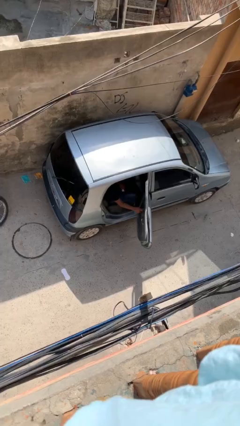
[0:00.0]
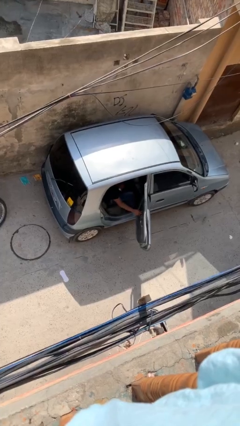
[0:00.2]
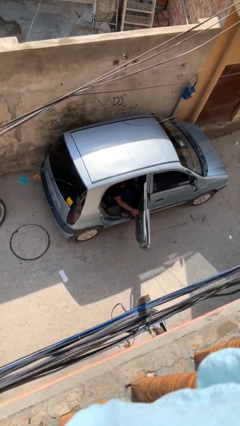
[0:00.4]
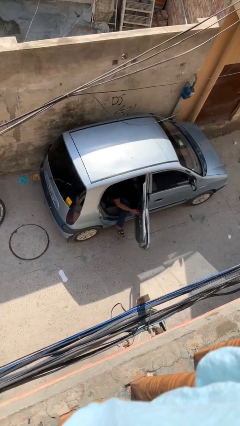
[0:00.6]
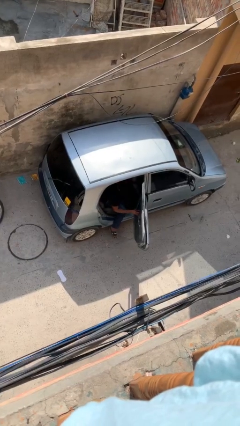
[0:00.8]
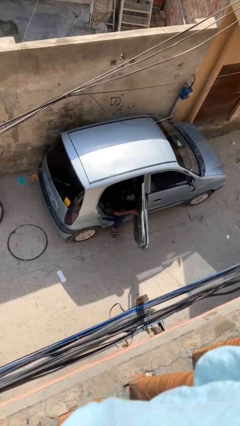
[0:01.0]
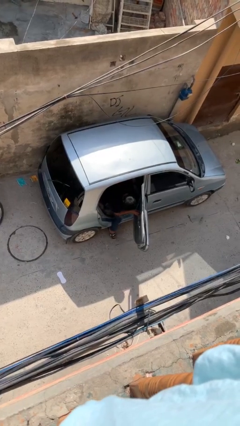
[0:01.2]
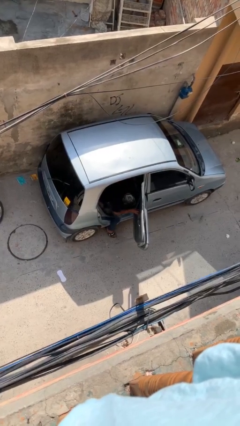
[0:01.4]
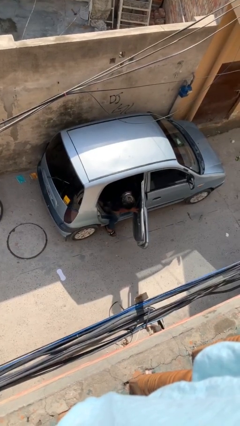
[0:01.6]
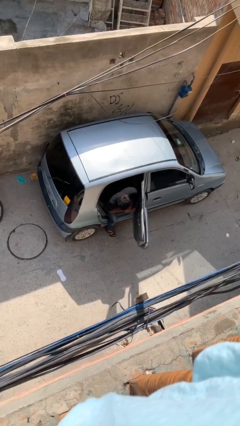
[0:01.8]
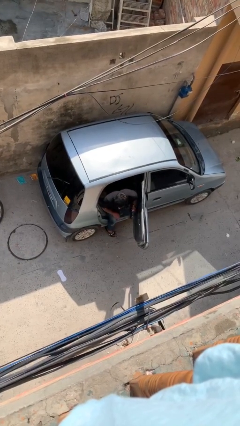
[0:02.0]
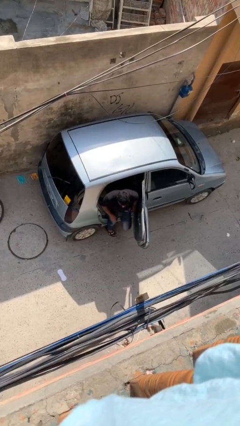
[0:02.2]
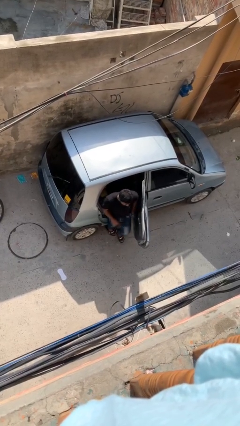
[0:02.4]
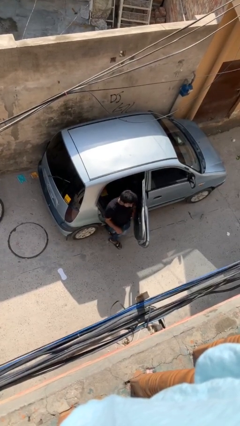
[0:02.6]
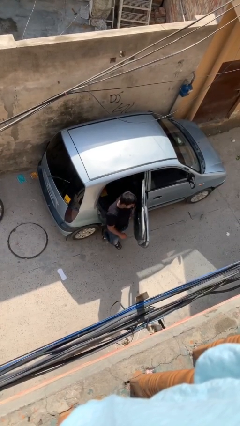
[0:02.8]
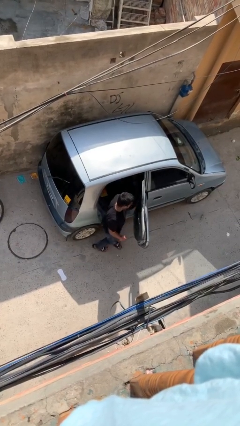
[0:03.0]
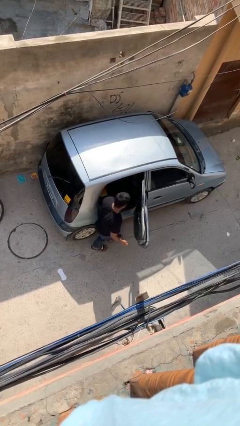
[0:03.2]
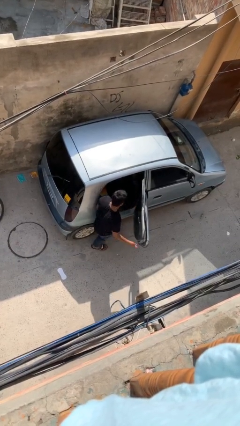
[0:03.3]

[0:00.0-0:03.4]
person exits car

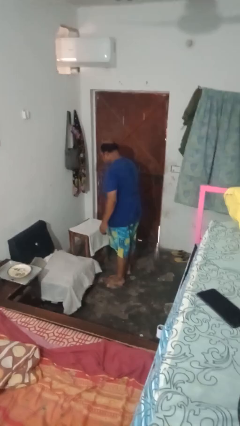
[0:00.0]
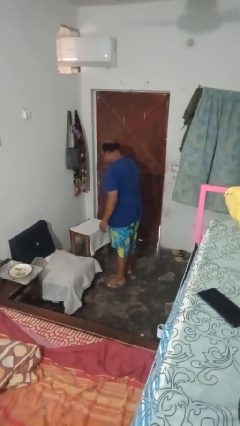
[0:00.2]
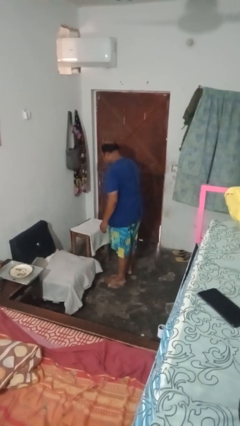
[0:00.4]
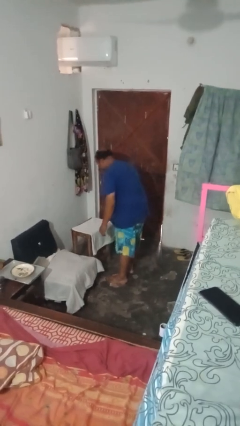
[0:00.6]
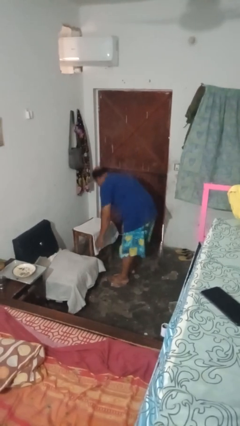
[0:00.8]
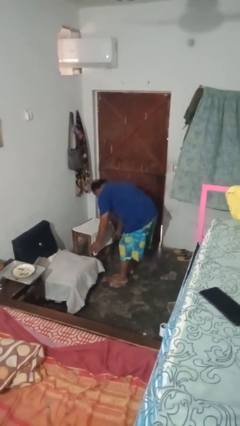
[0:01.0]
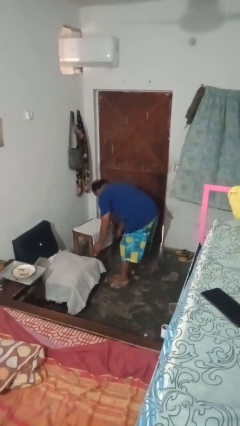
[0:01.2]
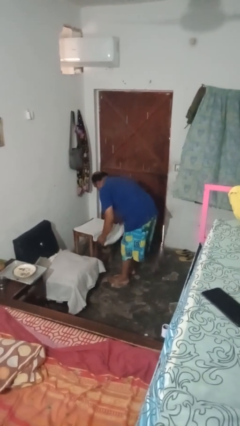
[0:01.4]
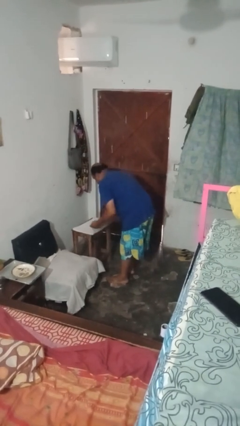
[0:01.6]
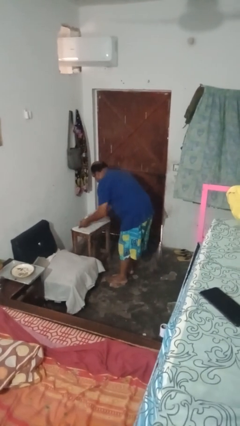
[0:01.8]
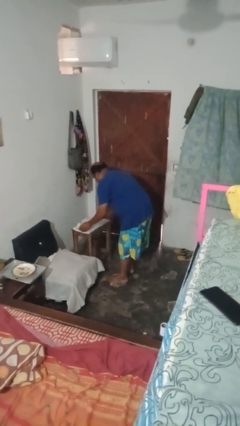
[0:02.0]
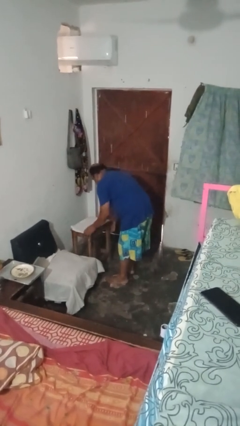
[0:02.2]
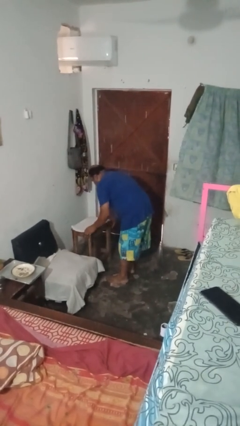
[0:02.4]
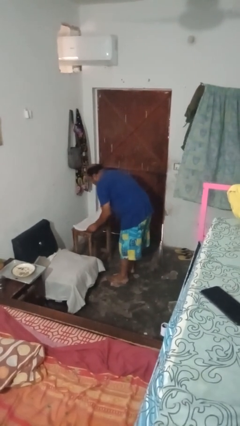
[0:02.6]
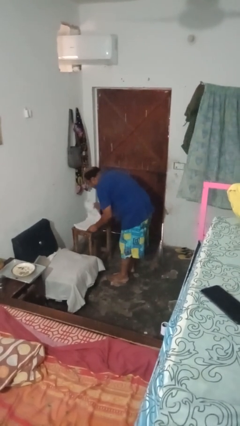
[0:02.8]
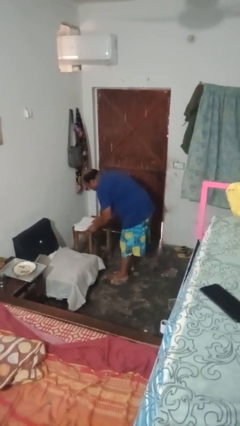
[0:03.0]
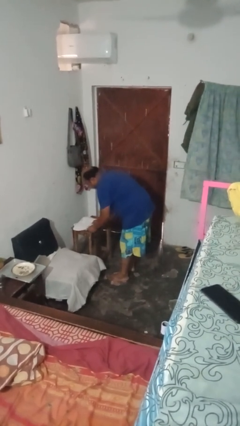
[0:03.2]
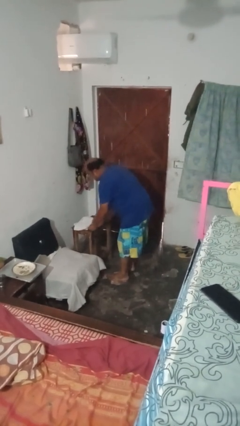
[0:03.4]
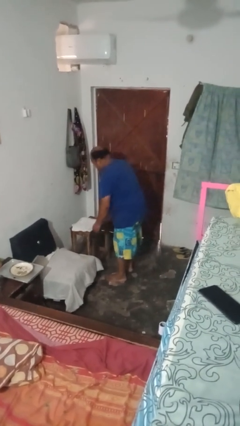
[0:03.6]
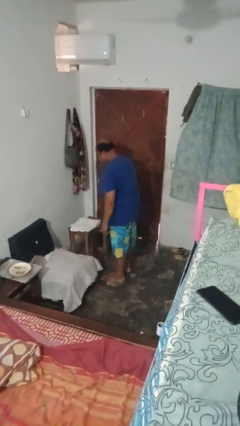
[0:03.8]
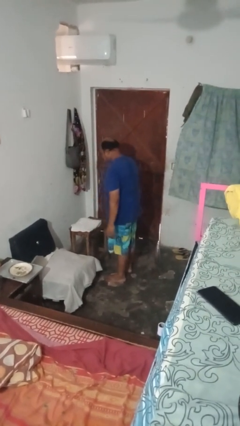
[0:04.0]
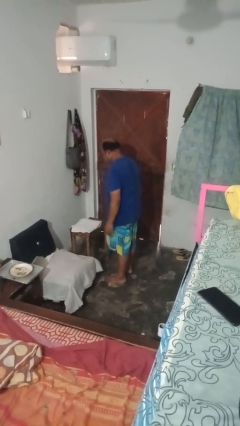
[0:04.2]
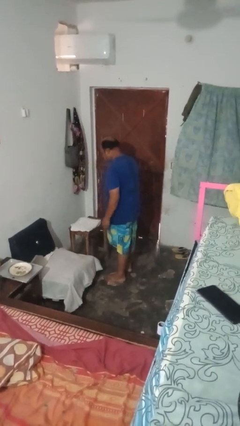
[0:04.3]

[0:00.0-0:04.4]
person folds towel

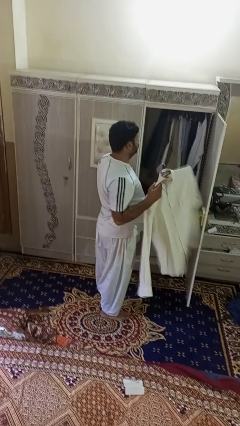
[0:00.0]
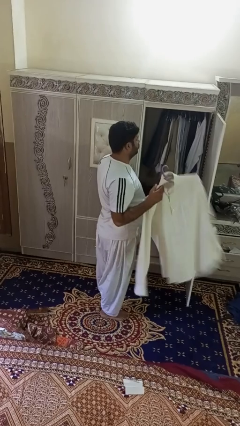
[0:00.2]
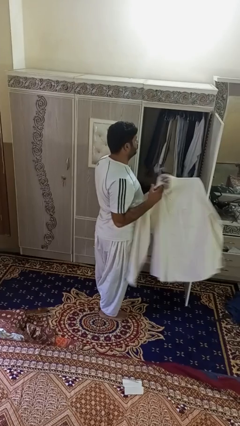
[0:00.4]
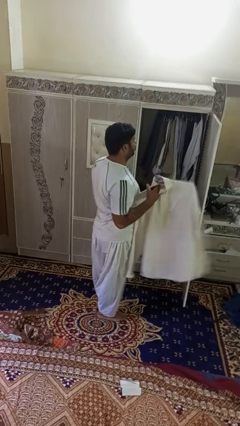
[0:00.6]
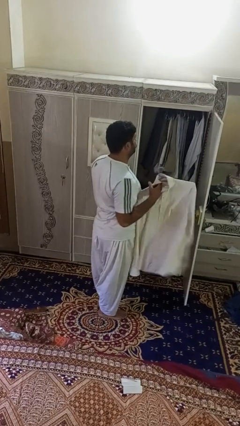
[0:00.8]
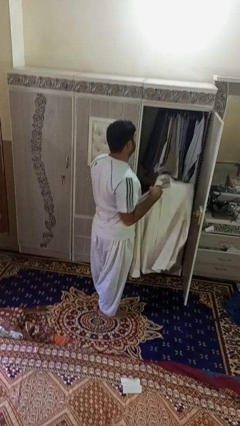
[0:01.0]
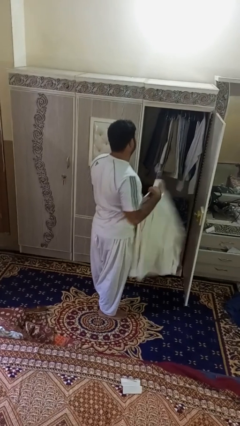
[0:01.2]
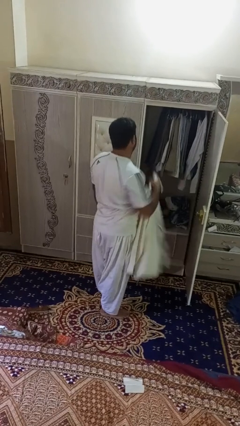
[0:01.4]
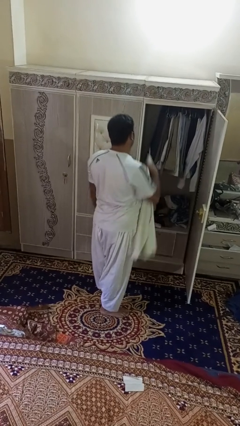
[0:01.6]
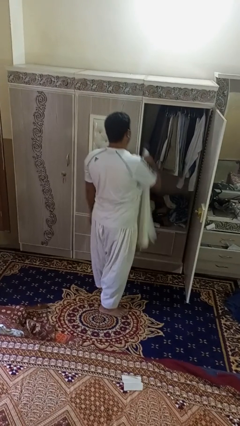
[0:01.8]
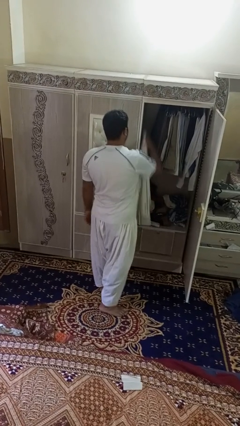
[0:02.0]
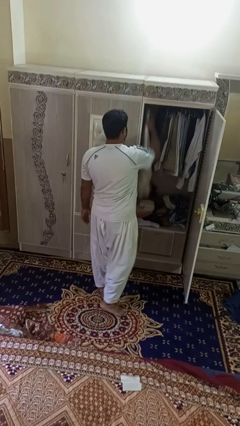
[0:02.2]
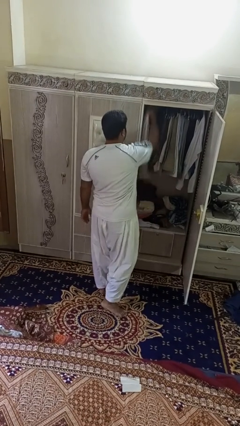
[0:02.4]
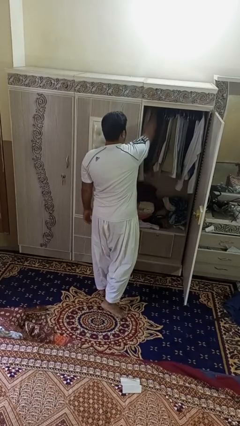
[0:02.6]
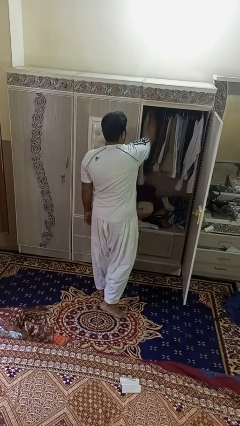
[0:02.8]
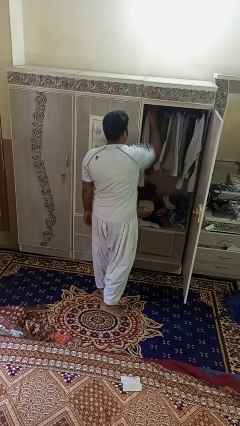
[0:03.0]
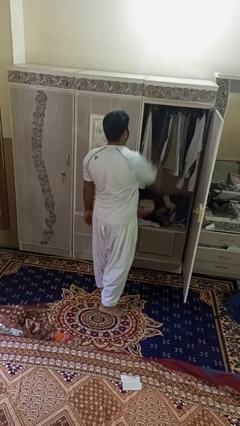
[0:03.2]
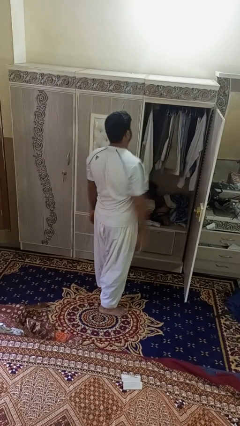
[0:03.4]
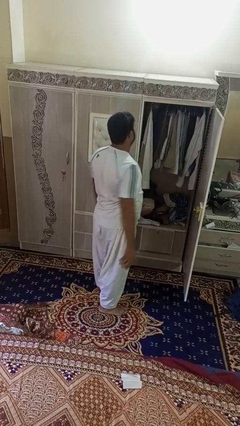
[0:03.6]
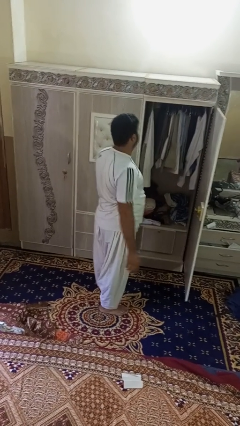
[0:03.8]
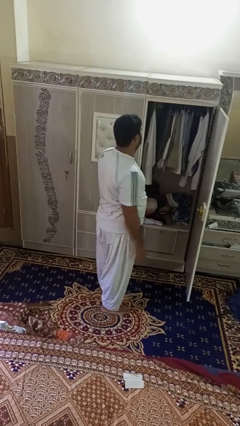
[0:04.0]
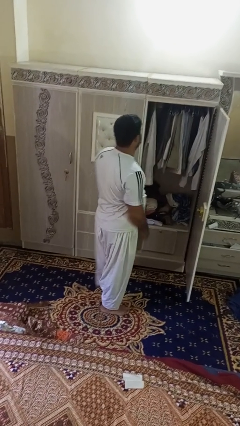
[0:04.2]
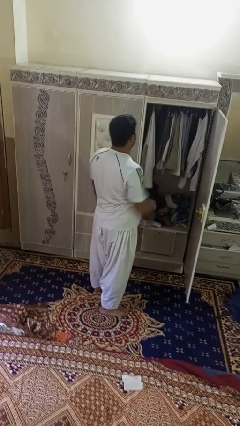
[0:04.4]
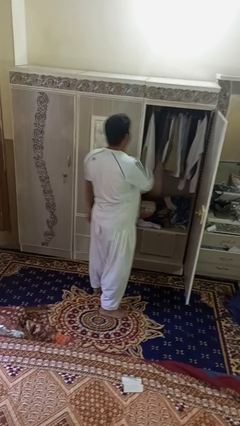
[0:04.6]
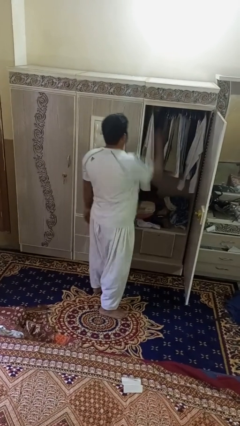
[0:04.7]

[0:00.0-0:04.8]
person puts clothes into closet

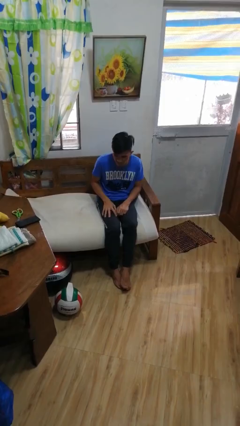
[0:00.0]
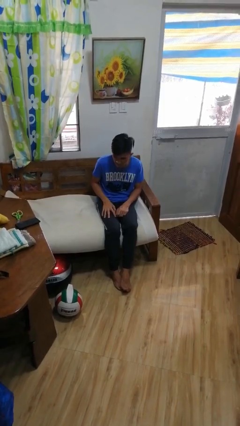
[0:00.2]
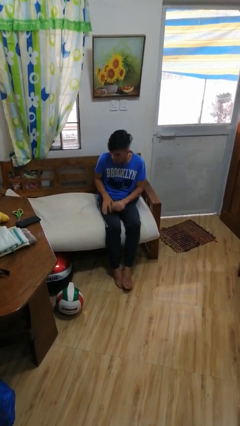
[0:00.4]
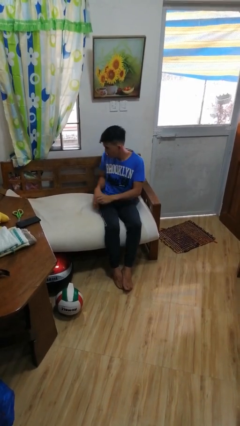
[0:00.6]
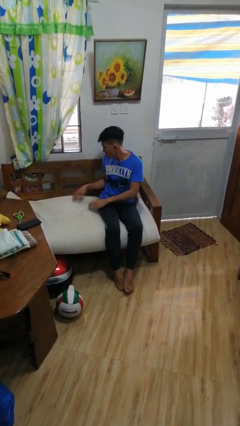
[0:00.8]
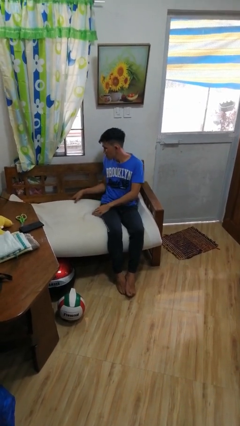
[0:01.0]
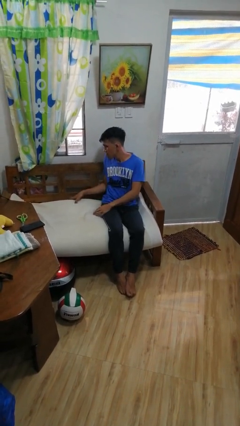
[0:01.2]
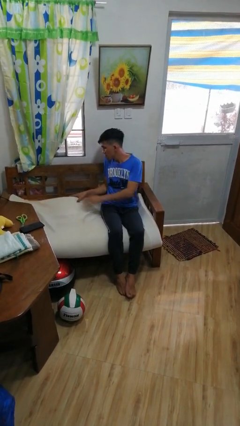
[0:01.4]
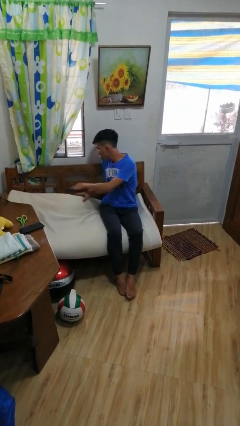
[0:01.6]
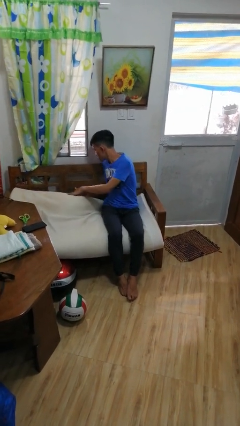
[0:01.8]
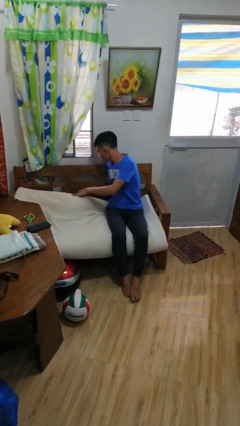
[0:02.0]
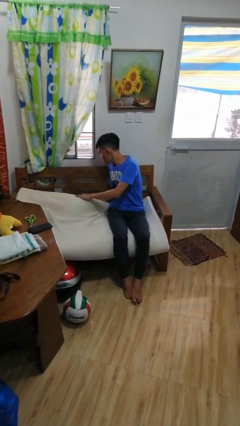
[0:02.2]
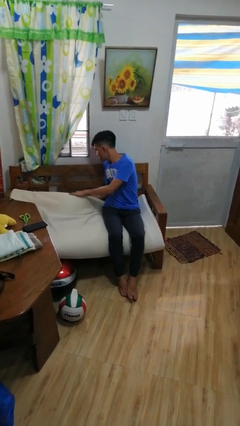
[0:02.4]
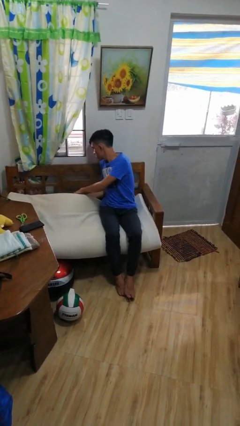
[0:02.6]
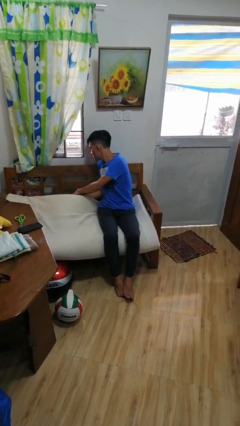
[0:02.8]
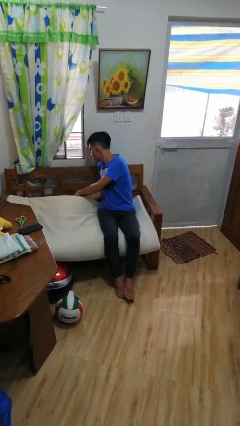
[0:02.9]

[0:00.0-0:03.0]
person searches in couch

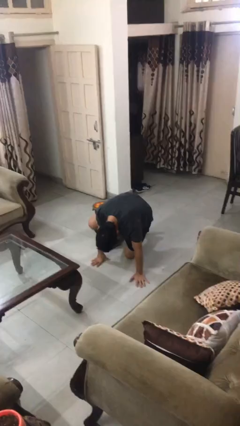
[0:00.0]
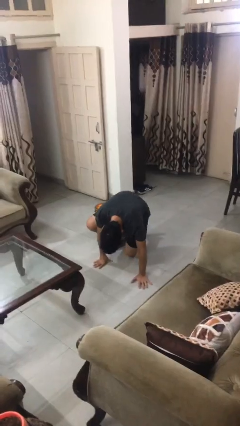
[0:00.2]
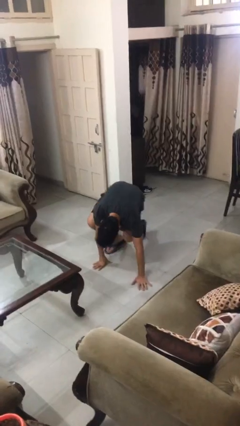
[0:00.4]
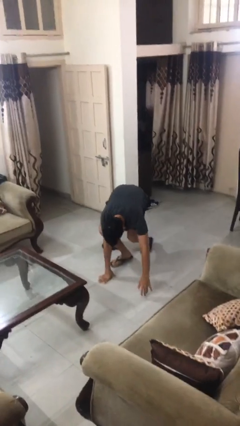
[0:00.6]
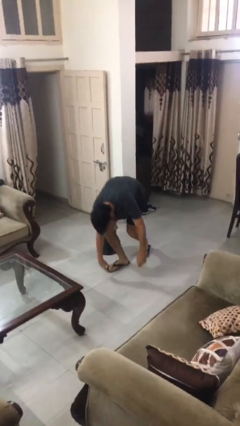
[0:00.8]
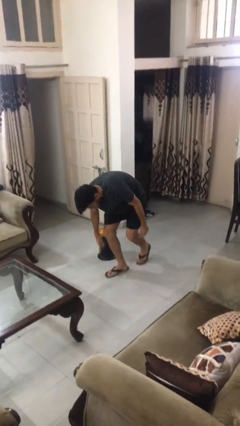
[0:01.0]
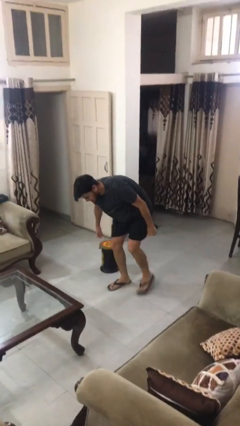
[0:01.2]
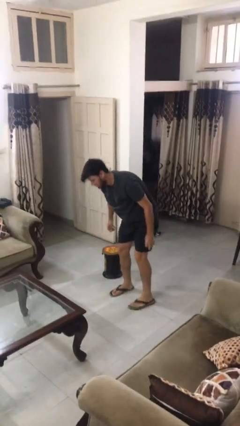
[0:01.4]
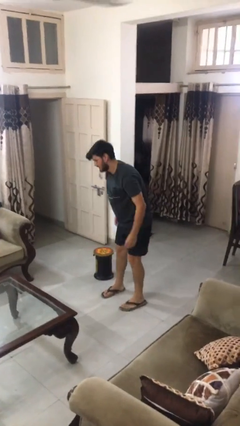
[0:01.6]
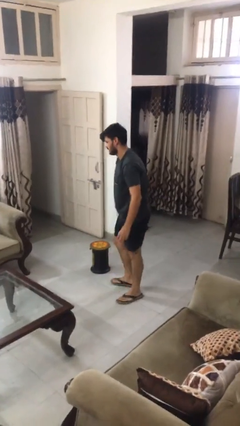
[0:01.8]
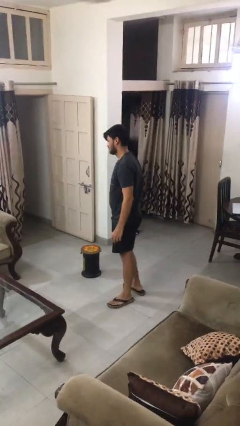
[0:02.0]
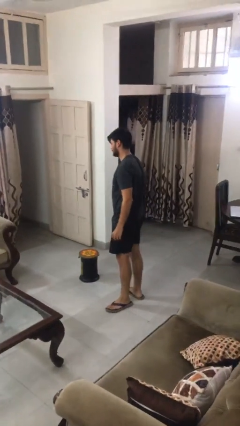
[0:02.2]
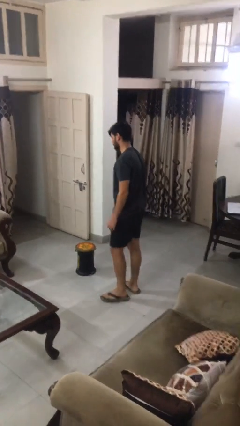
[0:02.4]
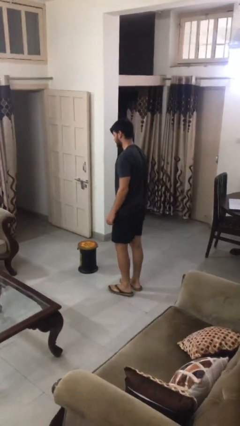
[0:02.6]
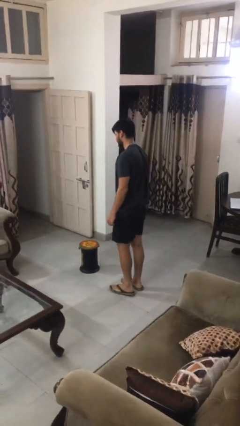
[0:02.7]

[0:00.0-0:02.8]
person stands up from floor
